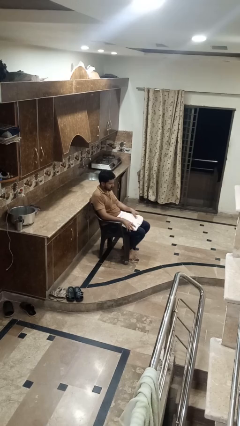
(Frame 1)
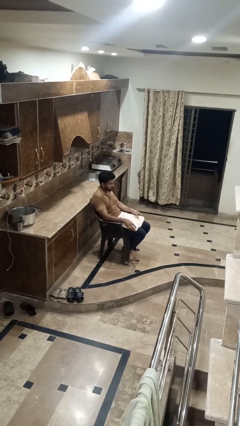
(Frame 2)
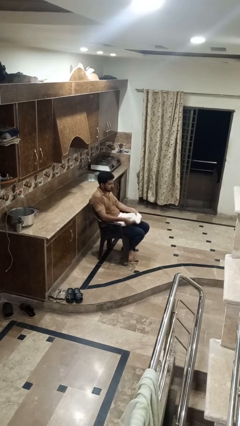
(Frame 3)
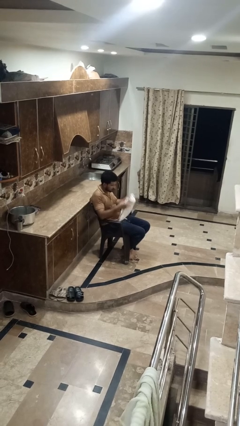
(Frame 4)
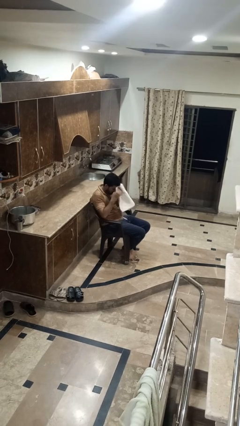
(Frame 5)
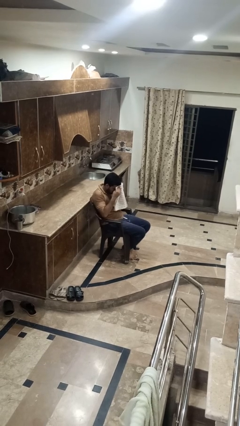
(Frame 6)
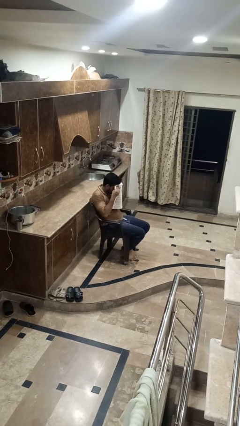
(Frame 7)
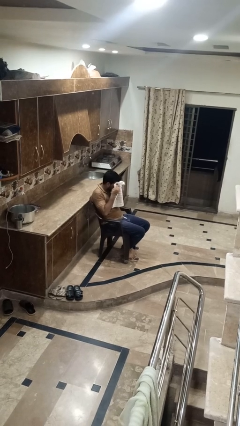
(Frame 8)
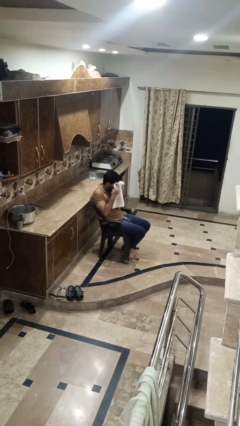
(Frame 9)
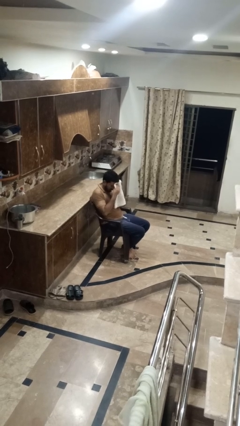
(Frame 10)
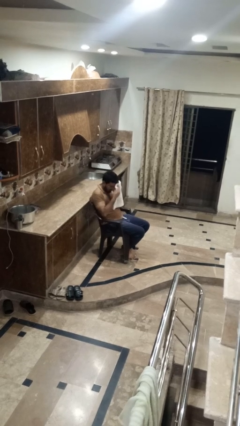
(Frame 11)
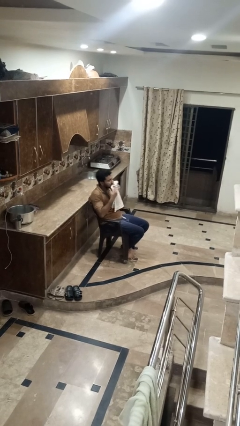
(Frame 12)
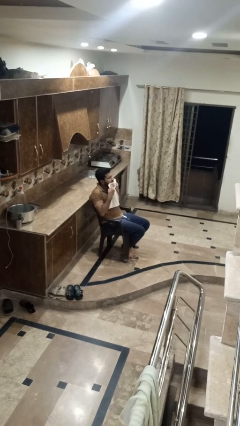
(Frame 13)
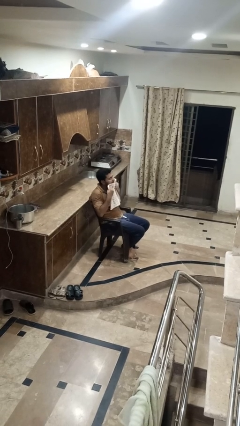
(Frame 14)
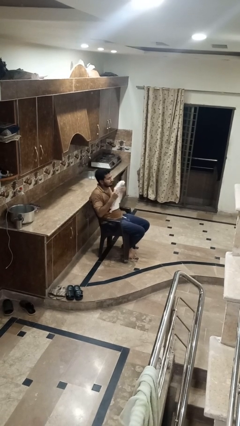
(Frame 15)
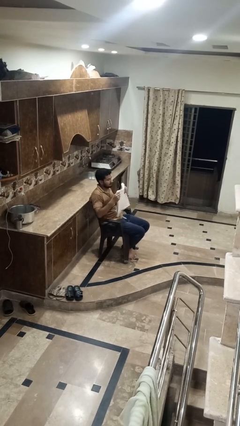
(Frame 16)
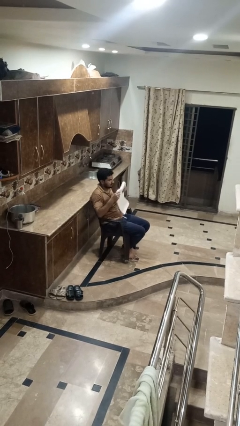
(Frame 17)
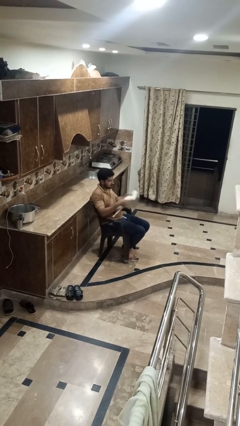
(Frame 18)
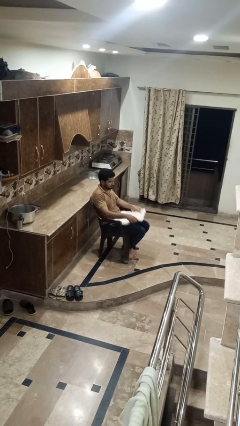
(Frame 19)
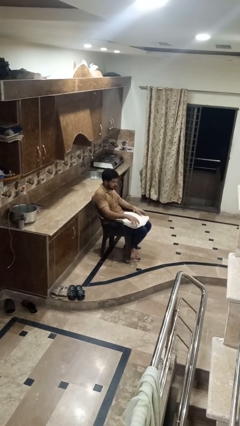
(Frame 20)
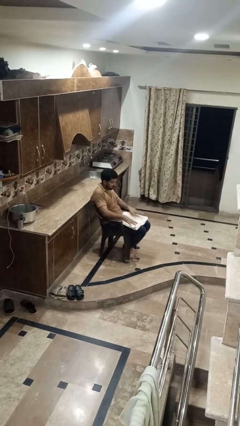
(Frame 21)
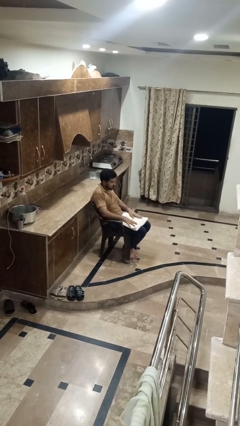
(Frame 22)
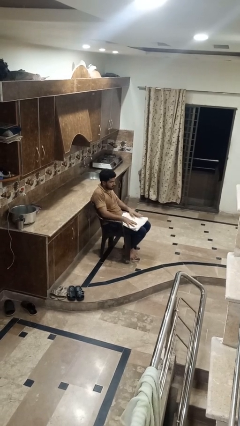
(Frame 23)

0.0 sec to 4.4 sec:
person wipes mouth with napkin

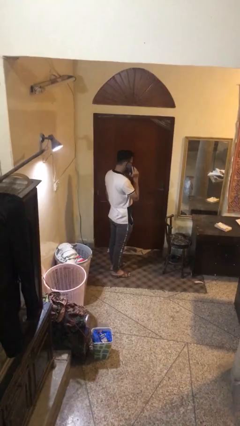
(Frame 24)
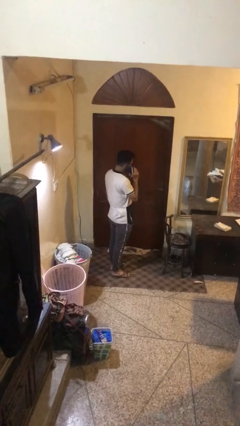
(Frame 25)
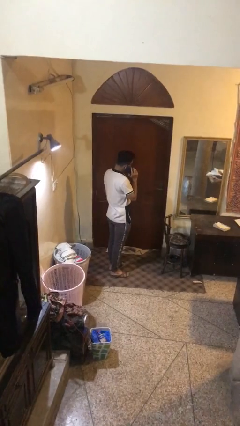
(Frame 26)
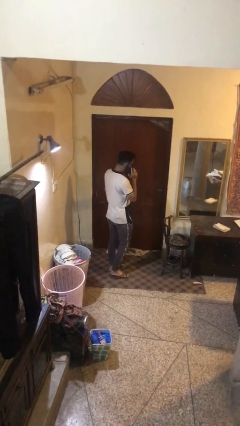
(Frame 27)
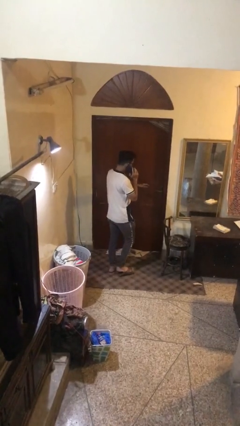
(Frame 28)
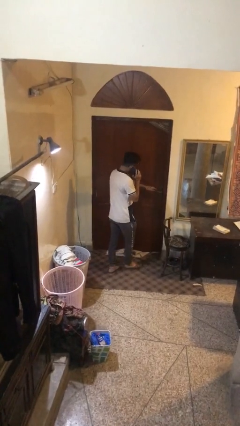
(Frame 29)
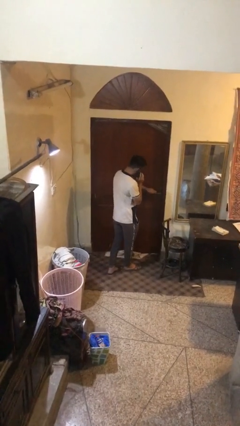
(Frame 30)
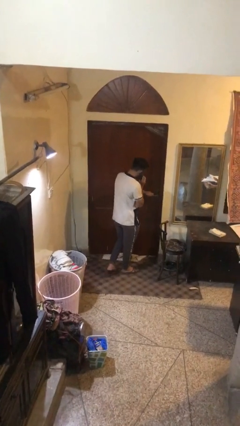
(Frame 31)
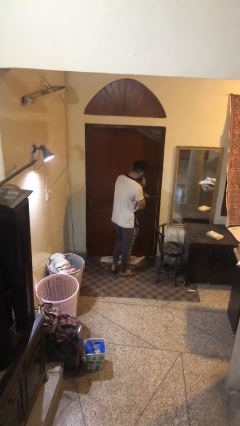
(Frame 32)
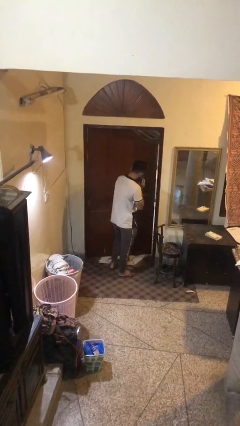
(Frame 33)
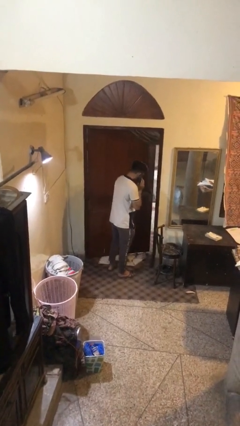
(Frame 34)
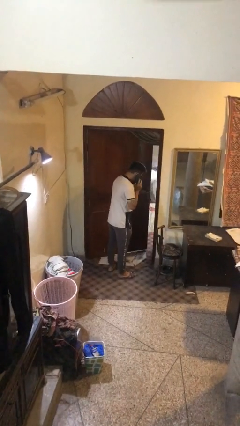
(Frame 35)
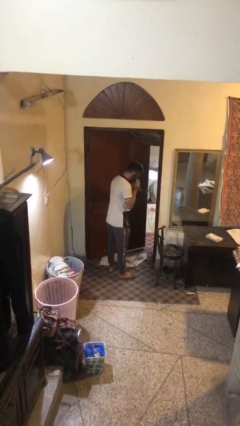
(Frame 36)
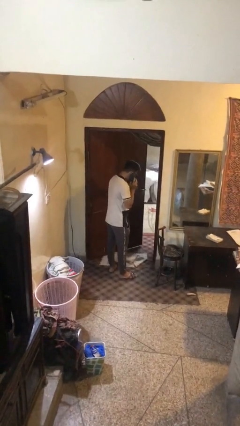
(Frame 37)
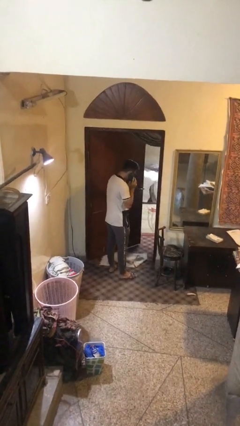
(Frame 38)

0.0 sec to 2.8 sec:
person opens facility door

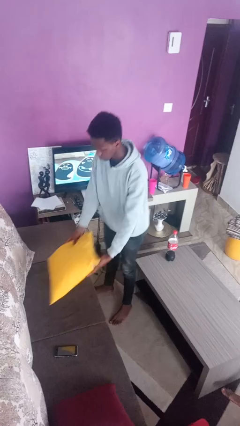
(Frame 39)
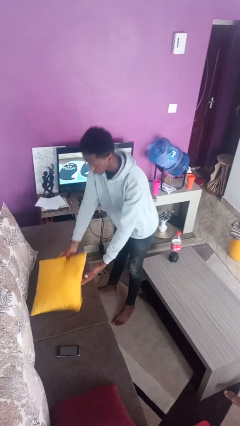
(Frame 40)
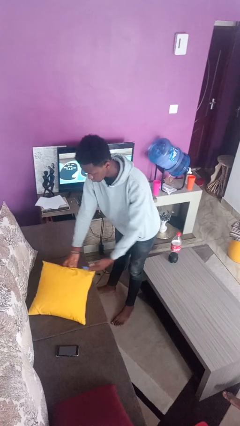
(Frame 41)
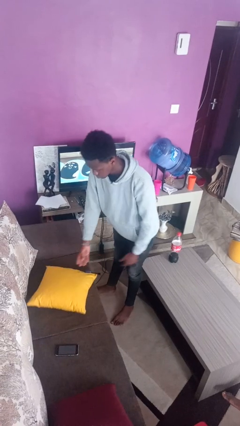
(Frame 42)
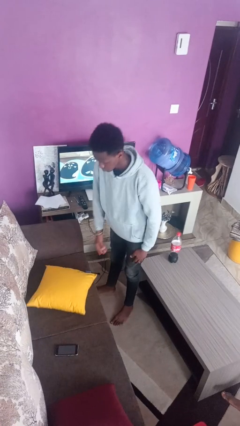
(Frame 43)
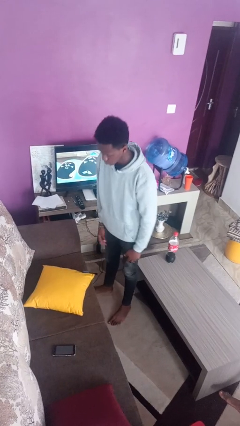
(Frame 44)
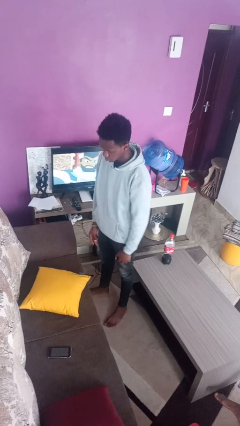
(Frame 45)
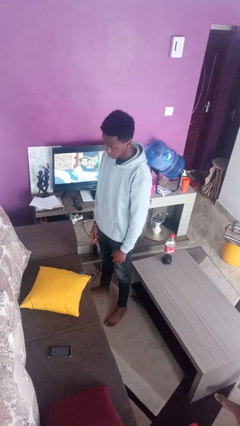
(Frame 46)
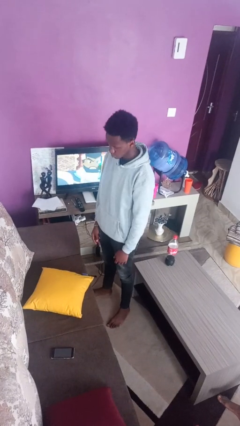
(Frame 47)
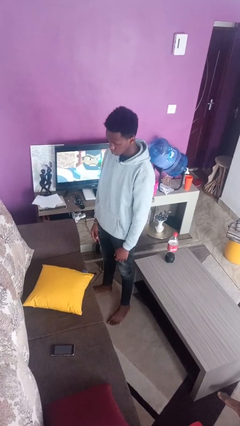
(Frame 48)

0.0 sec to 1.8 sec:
person puts down object on couch

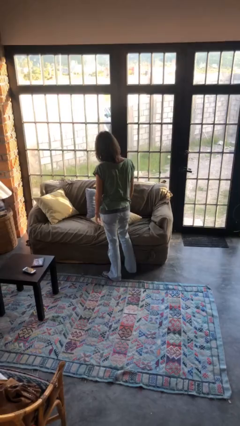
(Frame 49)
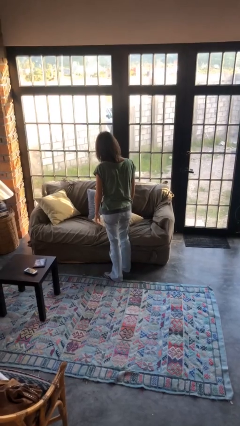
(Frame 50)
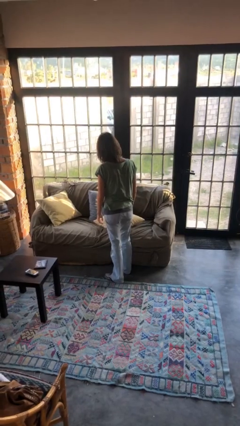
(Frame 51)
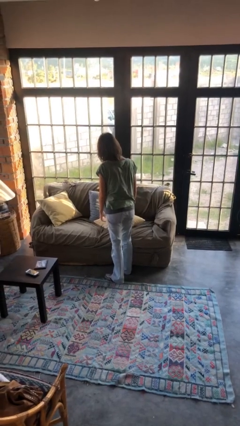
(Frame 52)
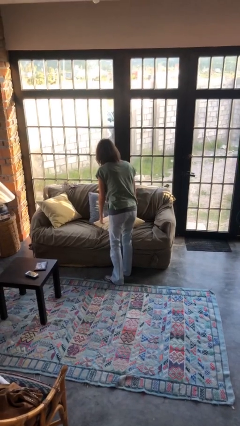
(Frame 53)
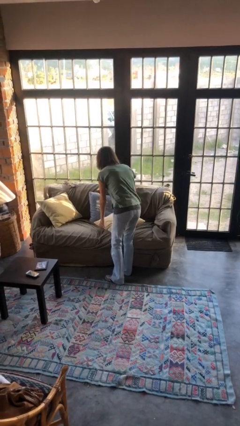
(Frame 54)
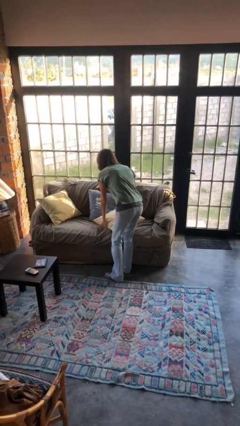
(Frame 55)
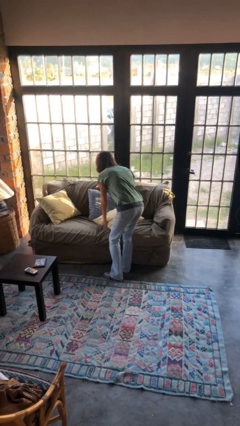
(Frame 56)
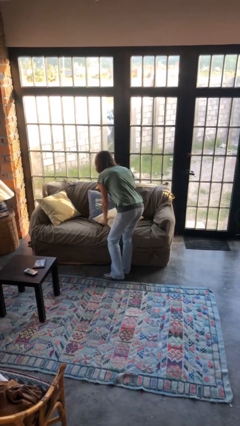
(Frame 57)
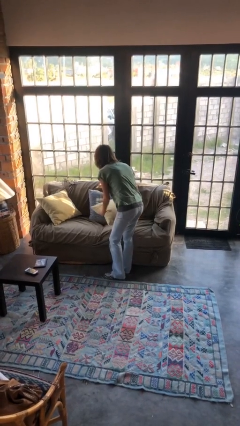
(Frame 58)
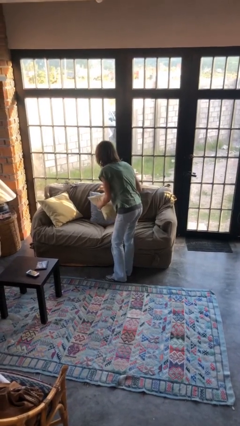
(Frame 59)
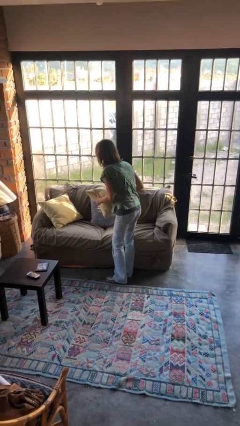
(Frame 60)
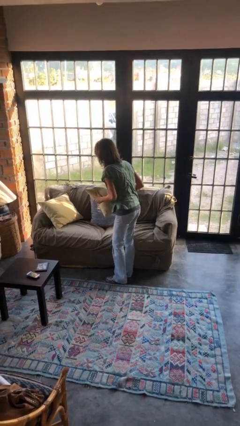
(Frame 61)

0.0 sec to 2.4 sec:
person picks up object from couch

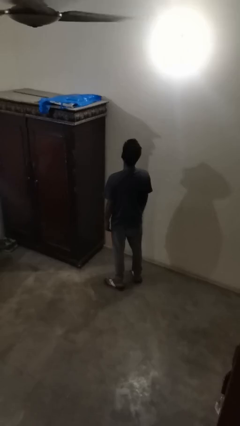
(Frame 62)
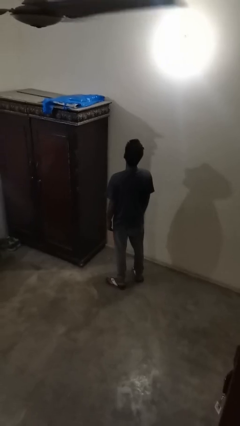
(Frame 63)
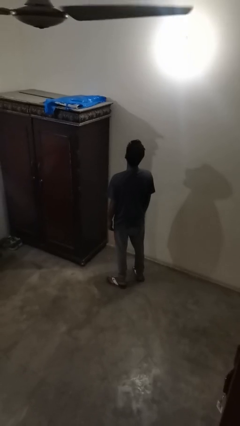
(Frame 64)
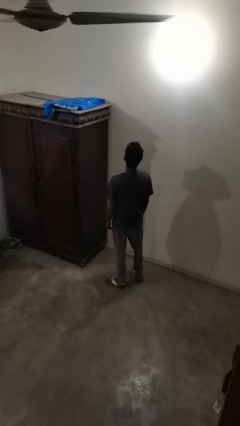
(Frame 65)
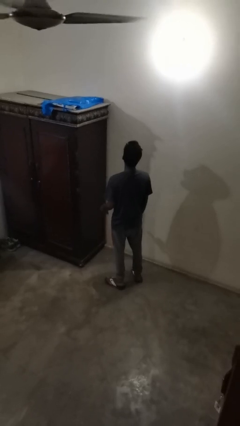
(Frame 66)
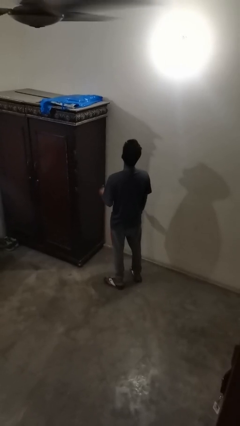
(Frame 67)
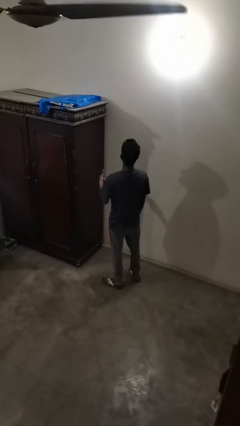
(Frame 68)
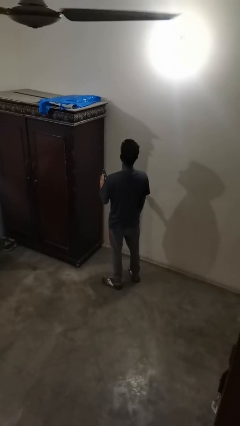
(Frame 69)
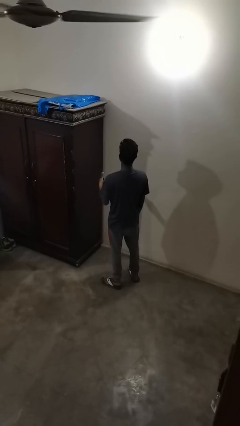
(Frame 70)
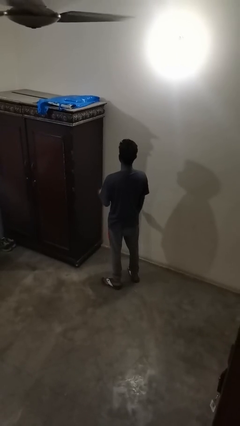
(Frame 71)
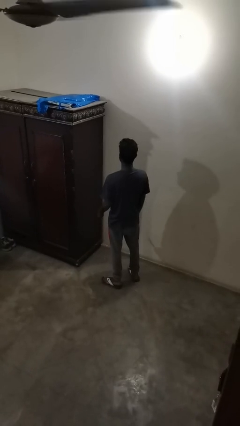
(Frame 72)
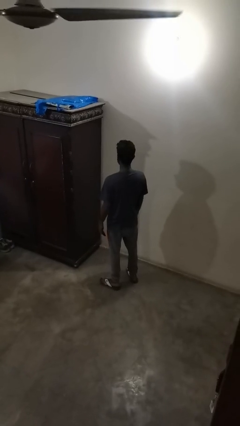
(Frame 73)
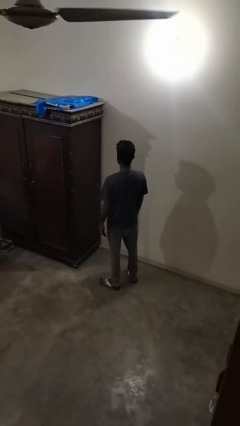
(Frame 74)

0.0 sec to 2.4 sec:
person uses television remote

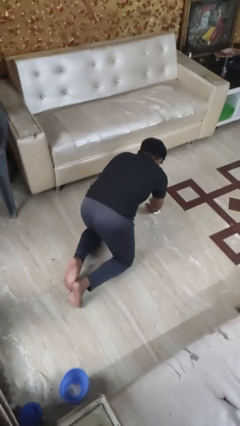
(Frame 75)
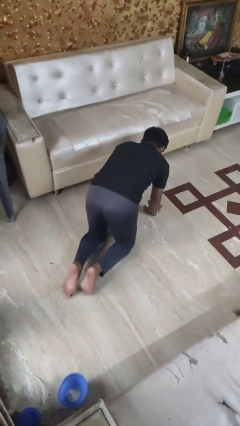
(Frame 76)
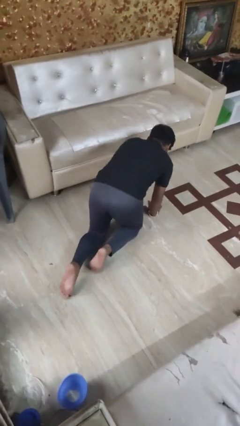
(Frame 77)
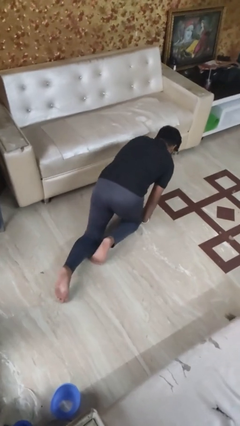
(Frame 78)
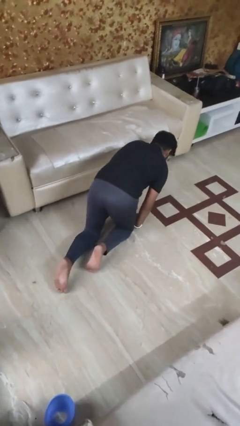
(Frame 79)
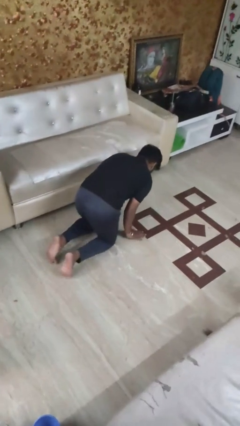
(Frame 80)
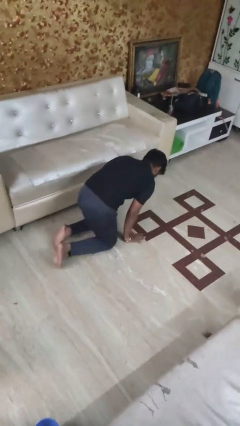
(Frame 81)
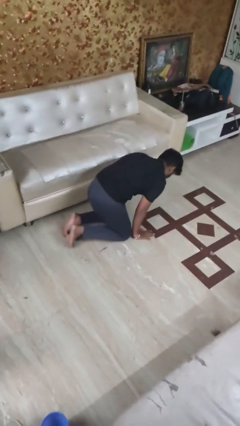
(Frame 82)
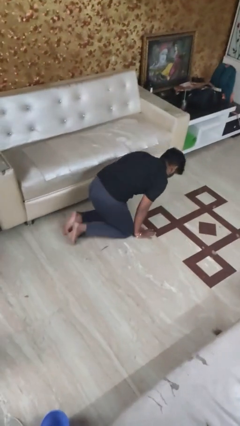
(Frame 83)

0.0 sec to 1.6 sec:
person crawls

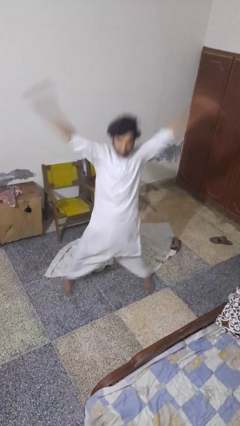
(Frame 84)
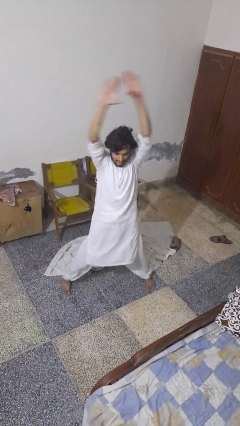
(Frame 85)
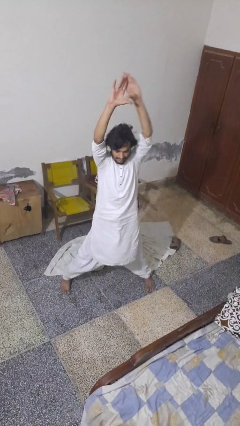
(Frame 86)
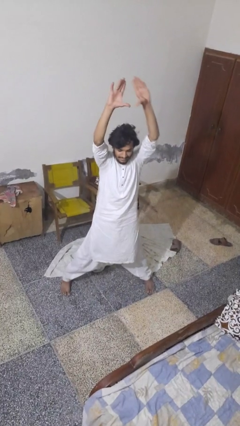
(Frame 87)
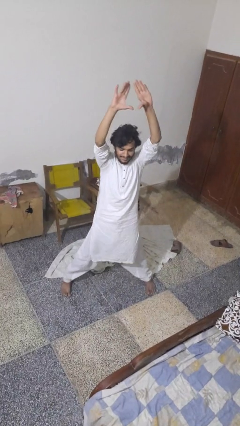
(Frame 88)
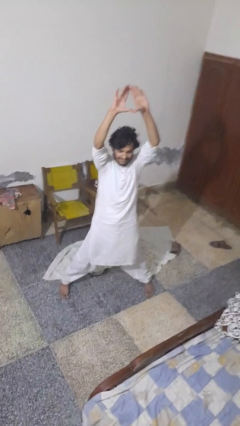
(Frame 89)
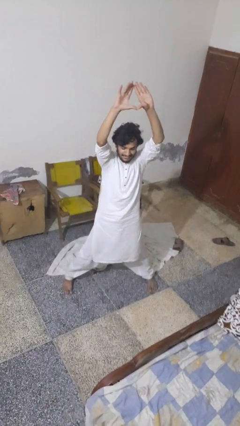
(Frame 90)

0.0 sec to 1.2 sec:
person exercises with jumping jacks

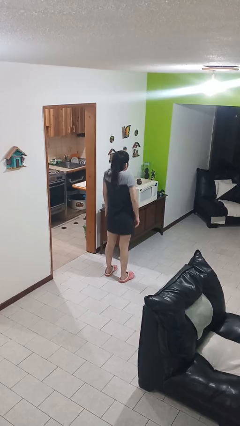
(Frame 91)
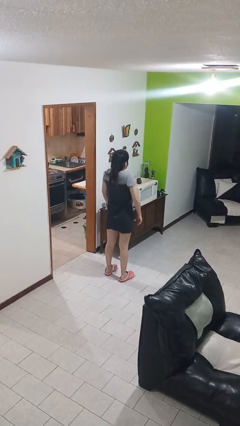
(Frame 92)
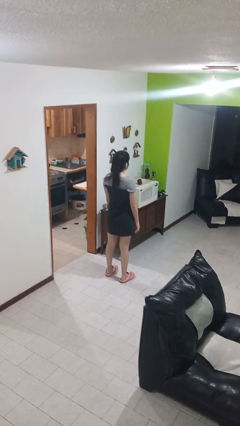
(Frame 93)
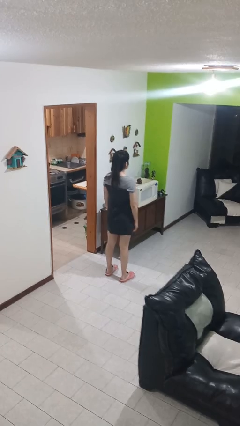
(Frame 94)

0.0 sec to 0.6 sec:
person shrugs
